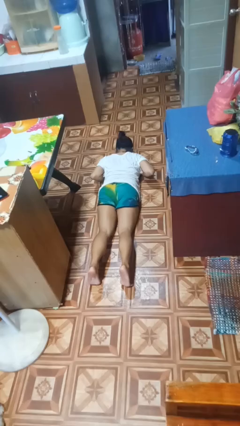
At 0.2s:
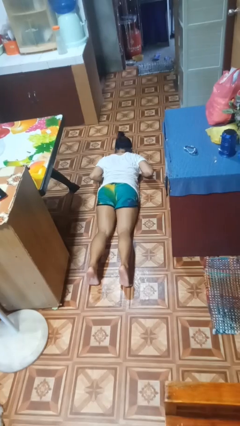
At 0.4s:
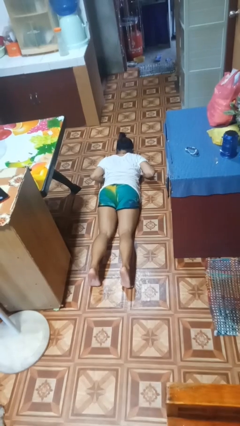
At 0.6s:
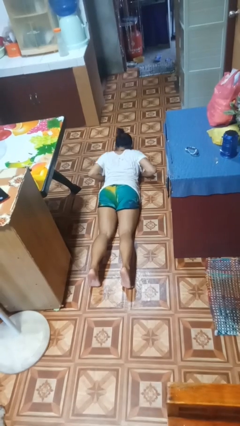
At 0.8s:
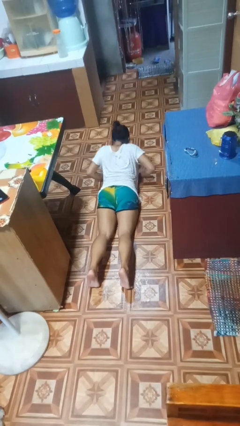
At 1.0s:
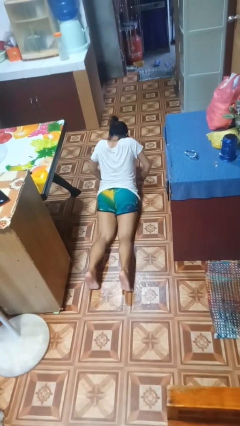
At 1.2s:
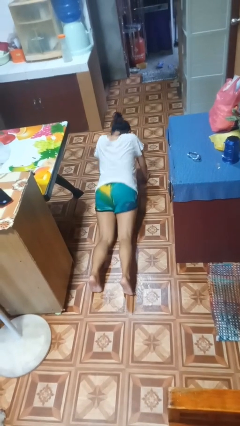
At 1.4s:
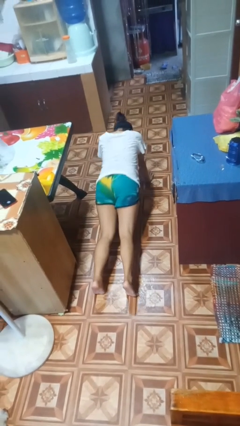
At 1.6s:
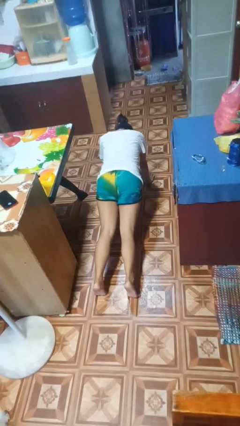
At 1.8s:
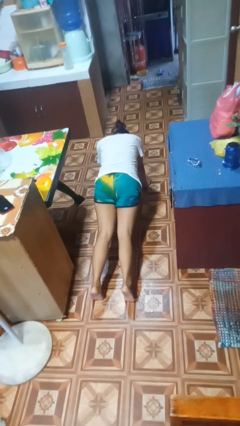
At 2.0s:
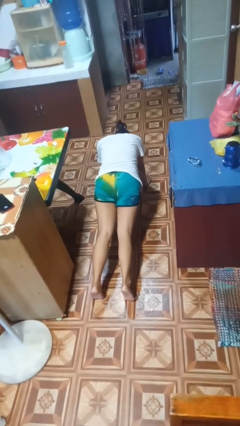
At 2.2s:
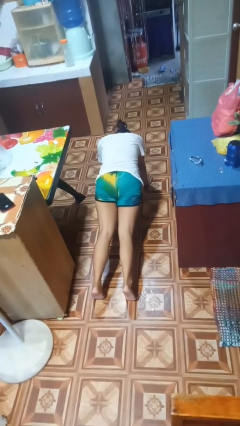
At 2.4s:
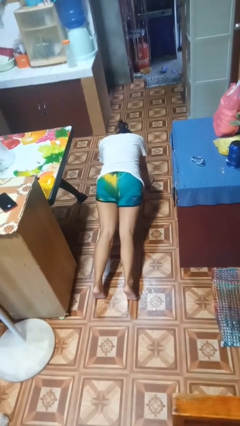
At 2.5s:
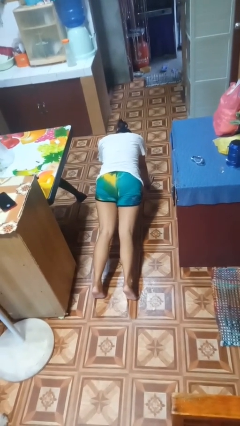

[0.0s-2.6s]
person exercises with pushup

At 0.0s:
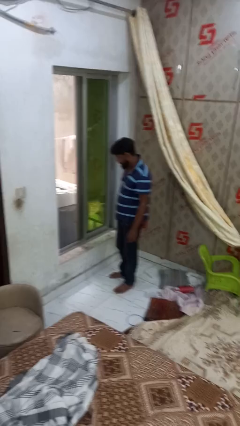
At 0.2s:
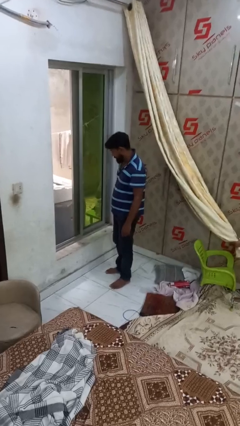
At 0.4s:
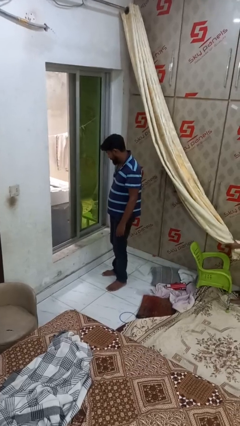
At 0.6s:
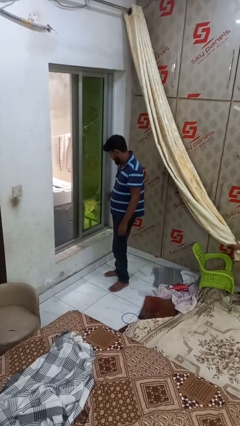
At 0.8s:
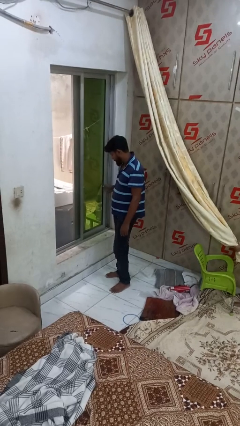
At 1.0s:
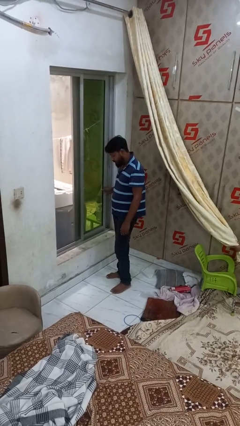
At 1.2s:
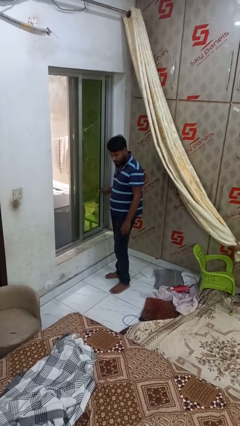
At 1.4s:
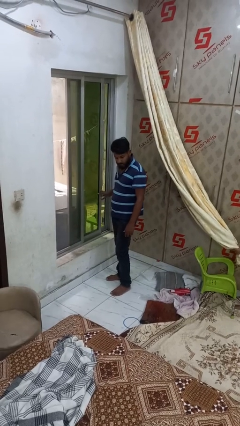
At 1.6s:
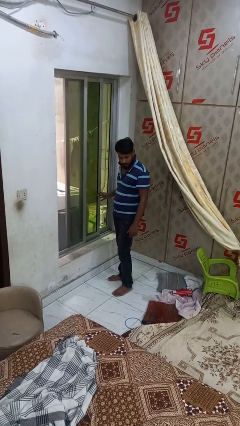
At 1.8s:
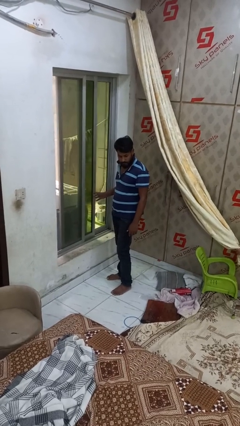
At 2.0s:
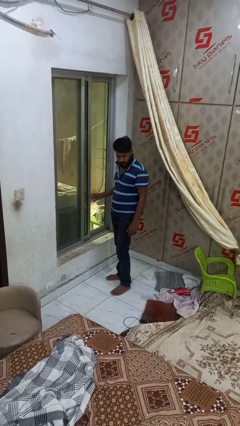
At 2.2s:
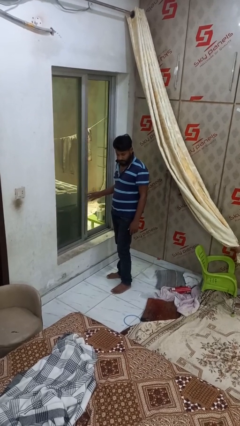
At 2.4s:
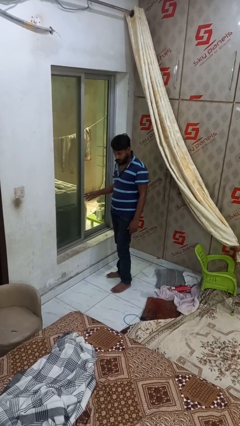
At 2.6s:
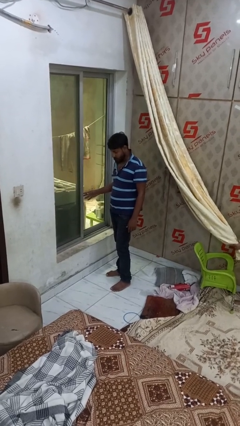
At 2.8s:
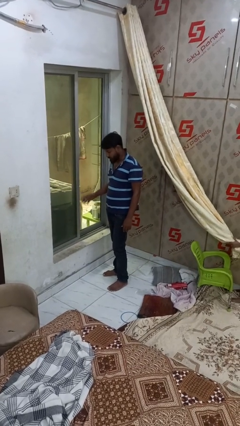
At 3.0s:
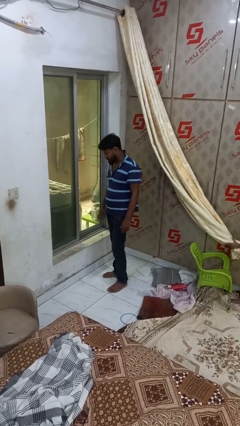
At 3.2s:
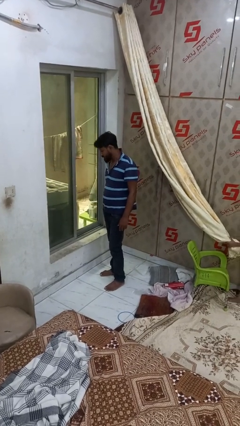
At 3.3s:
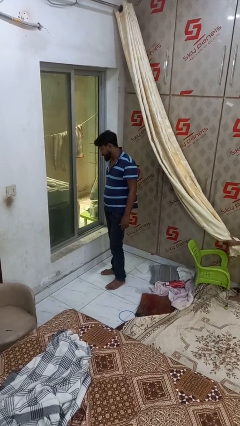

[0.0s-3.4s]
person closes sliding door

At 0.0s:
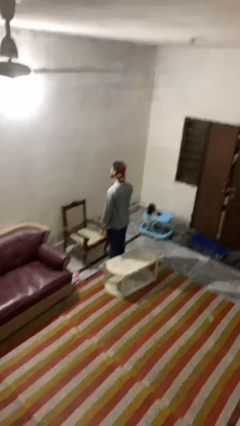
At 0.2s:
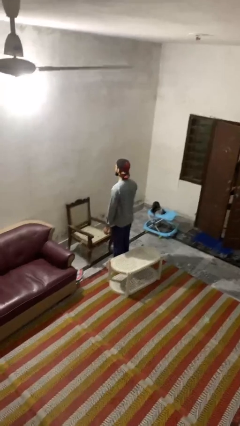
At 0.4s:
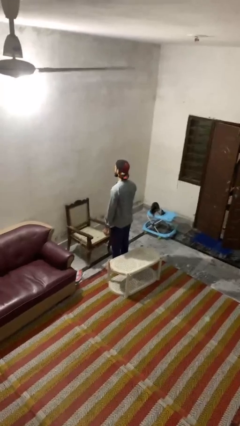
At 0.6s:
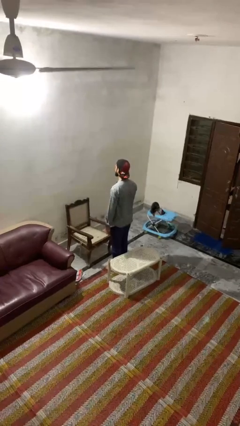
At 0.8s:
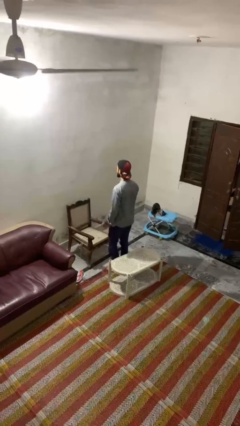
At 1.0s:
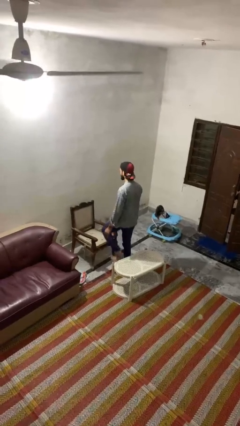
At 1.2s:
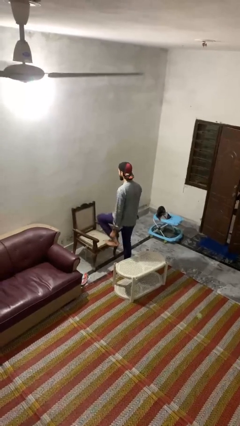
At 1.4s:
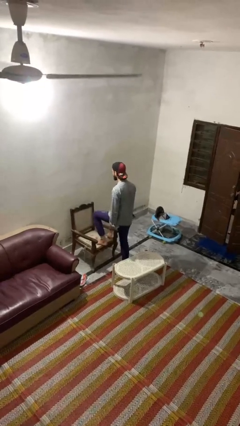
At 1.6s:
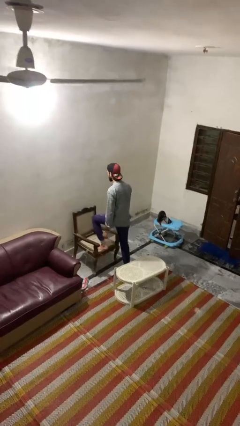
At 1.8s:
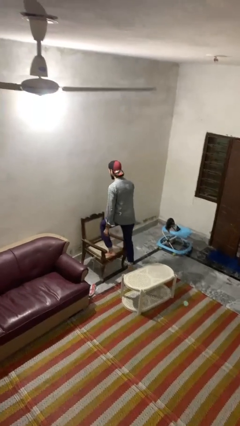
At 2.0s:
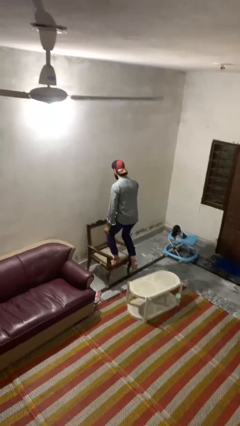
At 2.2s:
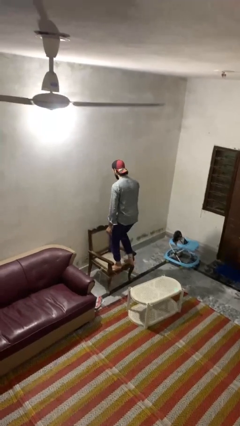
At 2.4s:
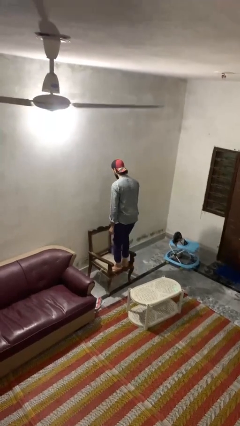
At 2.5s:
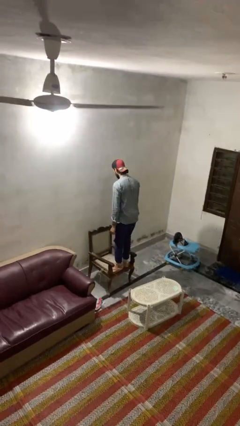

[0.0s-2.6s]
person climbs on chair

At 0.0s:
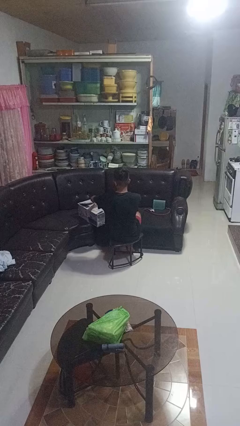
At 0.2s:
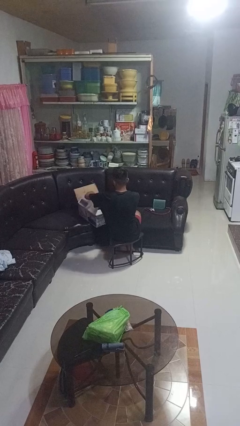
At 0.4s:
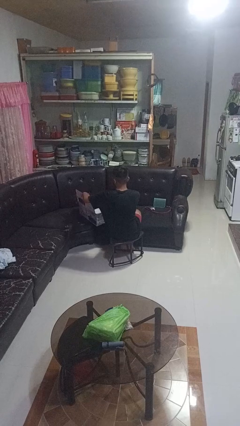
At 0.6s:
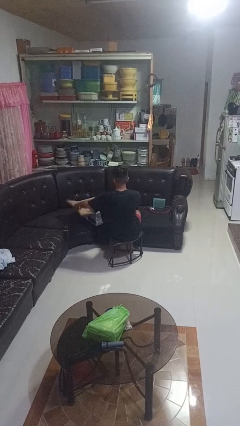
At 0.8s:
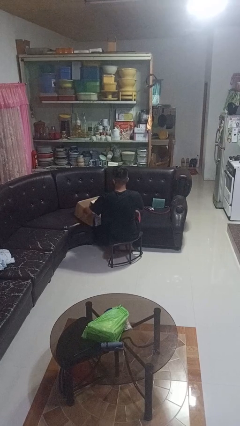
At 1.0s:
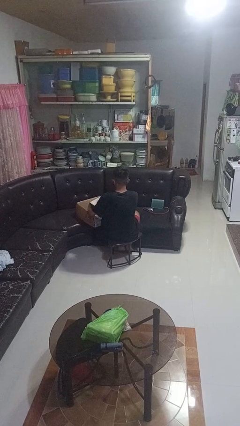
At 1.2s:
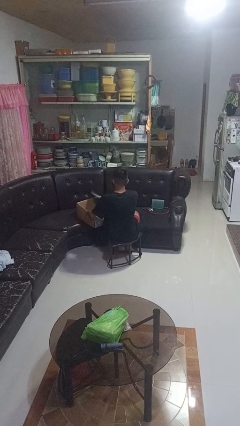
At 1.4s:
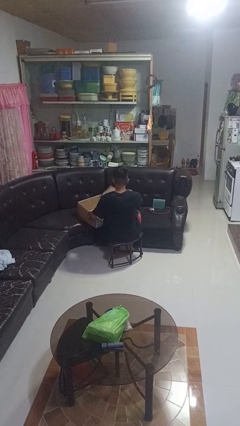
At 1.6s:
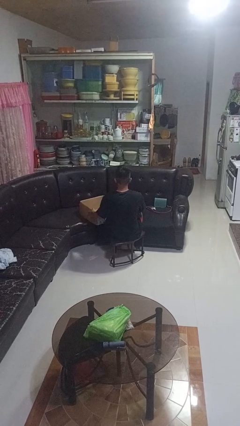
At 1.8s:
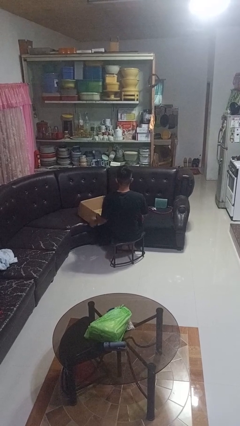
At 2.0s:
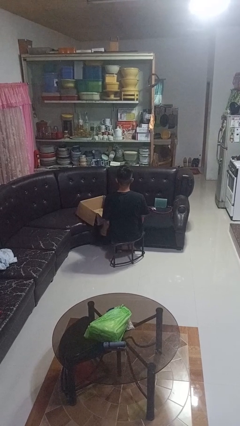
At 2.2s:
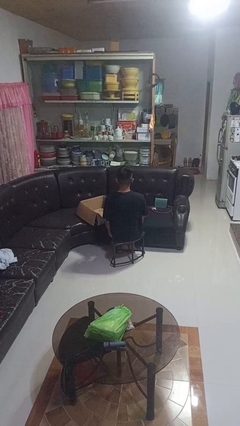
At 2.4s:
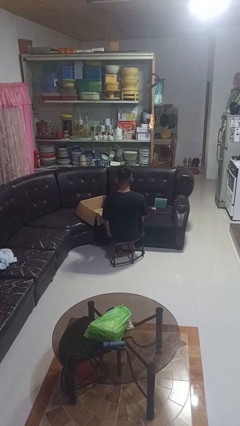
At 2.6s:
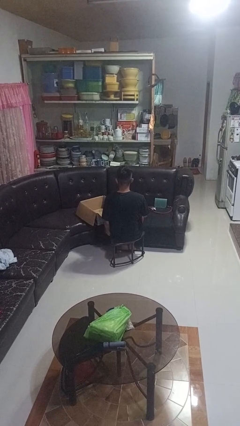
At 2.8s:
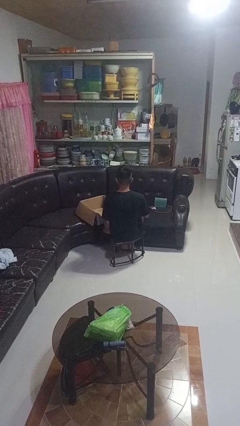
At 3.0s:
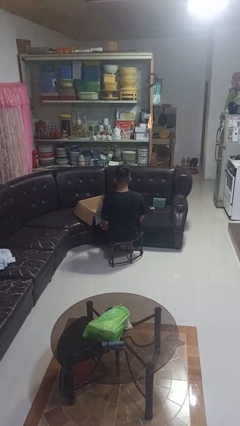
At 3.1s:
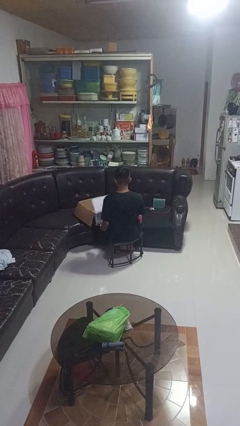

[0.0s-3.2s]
person opens box

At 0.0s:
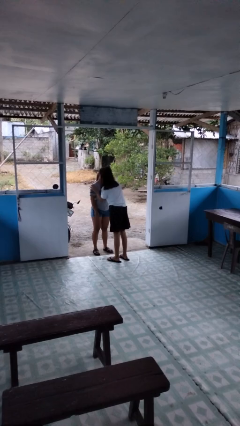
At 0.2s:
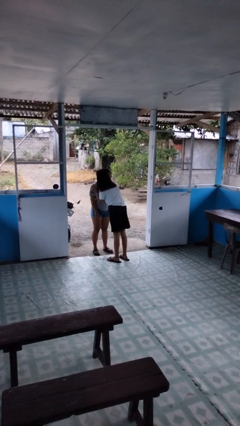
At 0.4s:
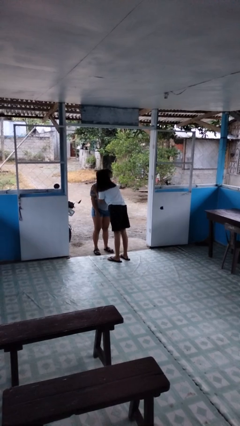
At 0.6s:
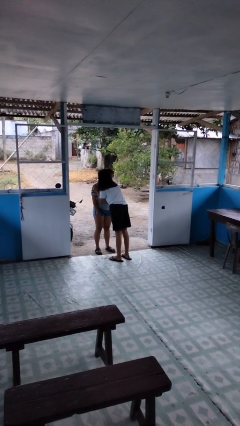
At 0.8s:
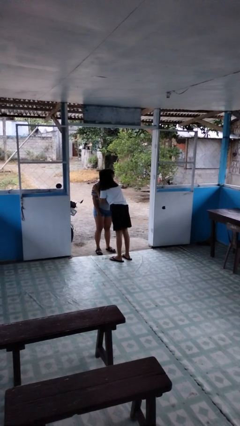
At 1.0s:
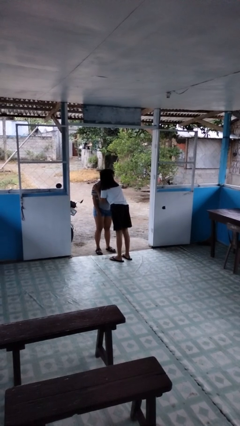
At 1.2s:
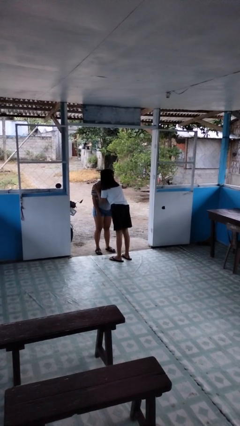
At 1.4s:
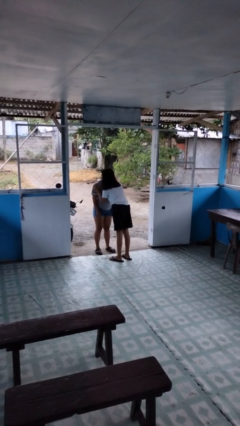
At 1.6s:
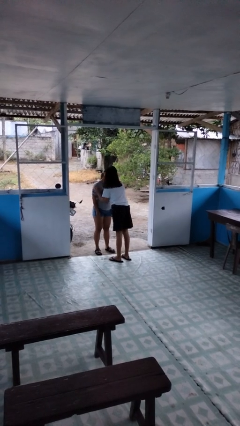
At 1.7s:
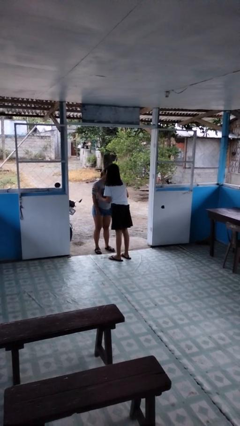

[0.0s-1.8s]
person kisses cheek of person

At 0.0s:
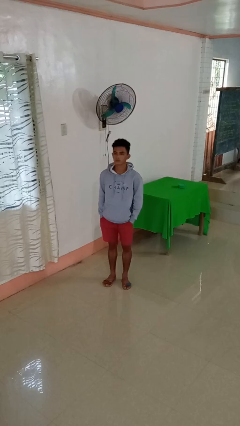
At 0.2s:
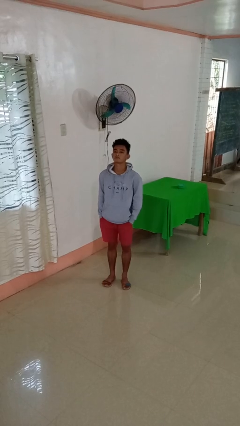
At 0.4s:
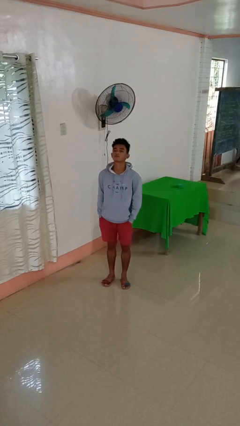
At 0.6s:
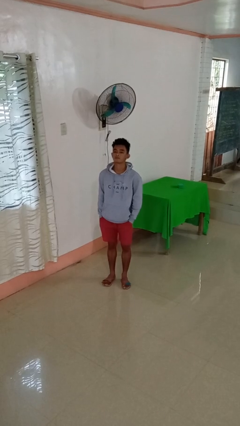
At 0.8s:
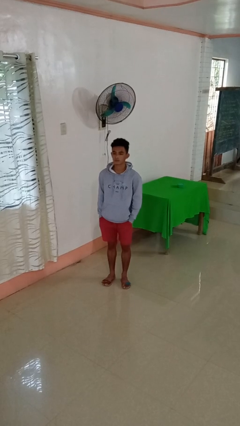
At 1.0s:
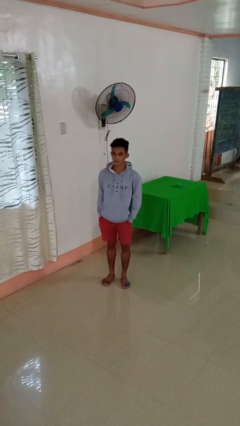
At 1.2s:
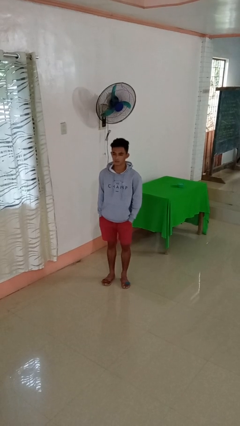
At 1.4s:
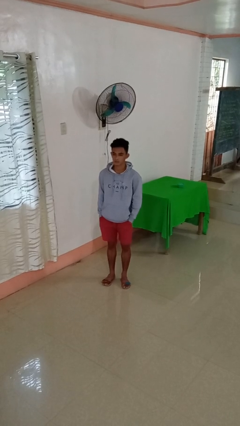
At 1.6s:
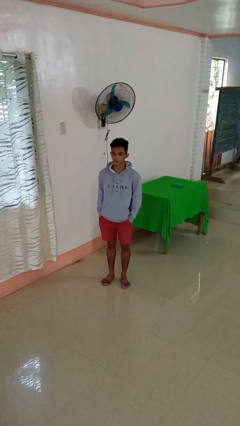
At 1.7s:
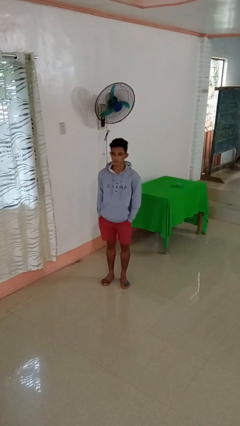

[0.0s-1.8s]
person nods head

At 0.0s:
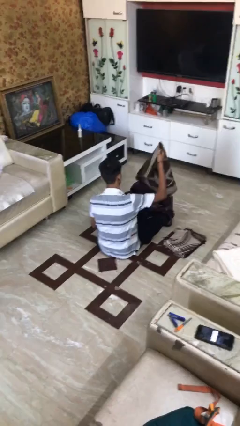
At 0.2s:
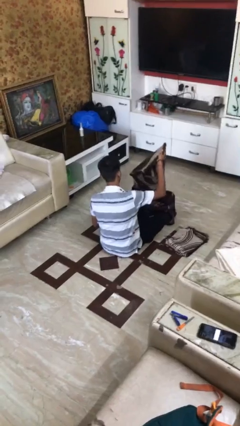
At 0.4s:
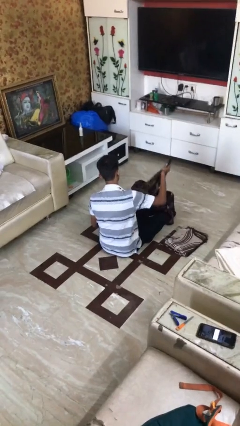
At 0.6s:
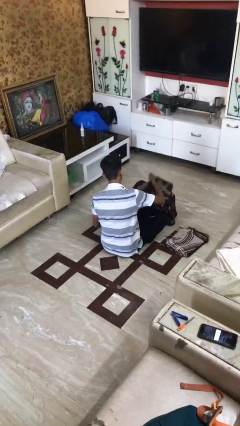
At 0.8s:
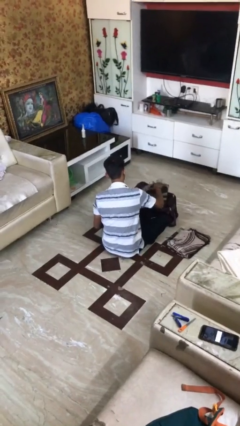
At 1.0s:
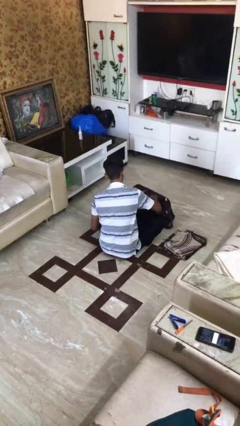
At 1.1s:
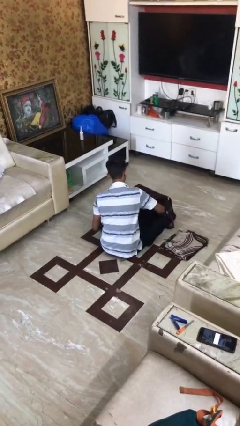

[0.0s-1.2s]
person loads clothes into suitcase

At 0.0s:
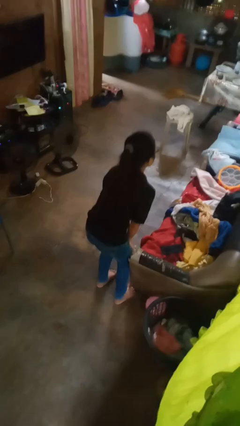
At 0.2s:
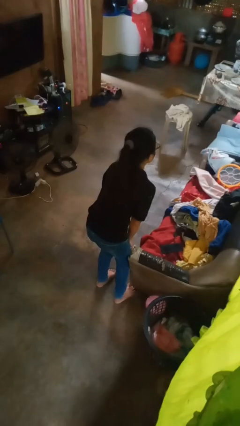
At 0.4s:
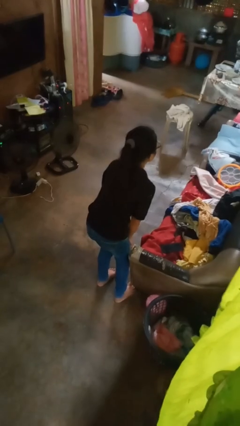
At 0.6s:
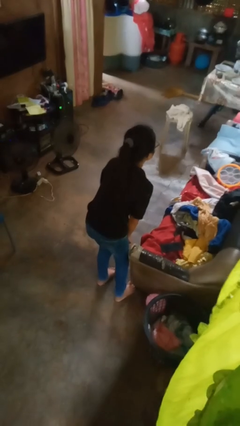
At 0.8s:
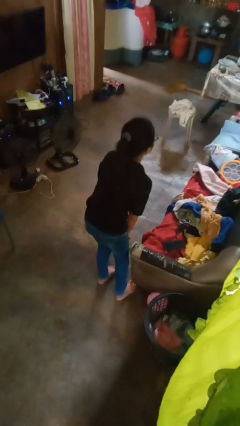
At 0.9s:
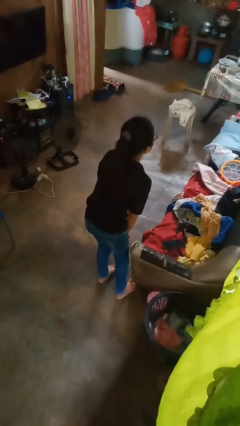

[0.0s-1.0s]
person stubs toe
